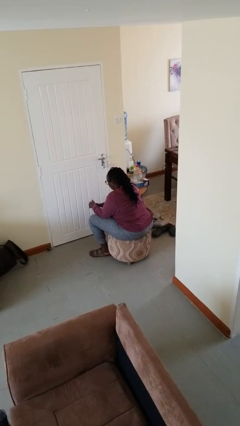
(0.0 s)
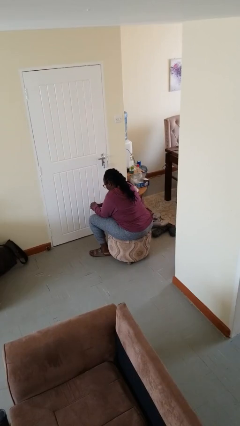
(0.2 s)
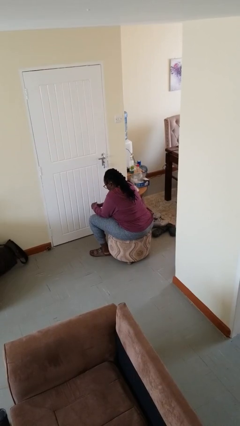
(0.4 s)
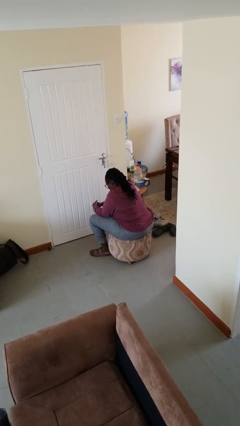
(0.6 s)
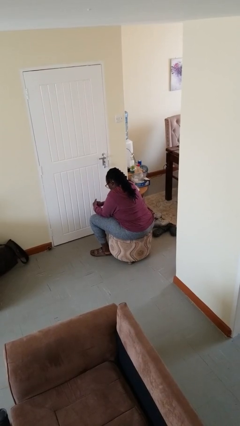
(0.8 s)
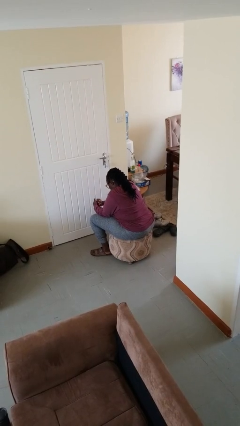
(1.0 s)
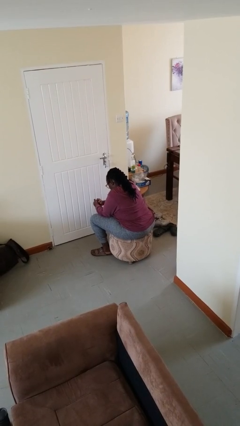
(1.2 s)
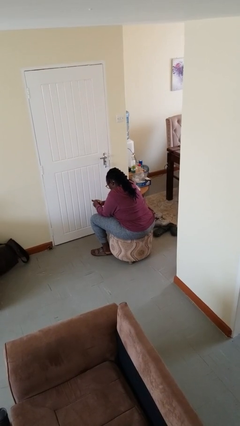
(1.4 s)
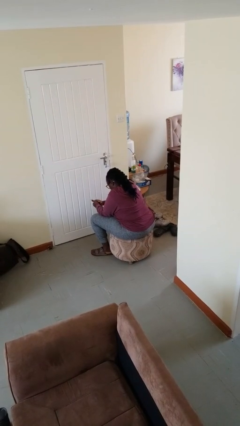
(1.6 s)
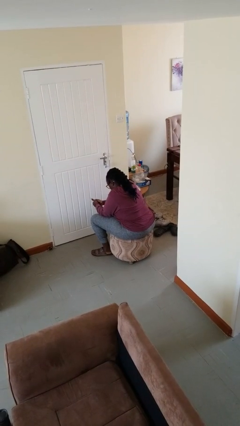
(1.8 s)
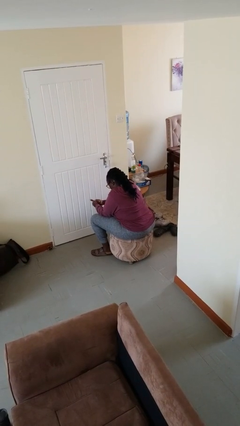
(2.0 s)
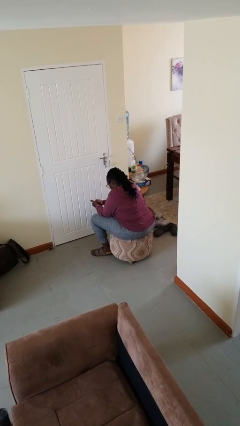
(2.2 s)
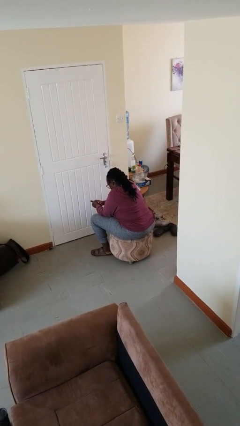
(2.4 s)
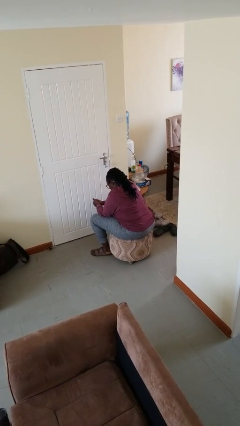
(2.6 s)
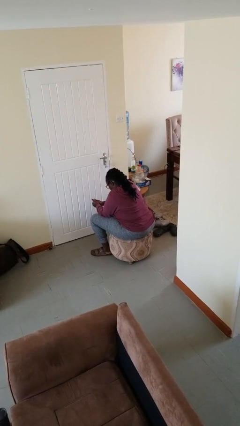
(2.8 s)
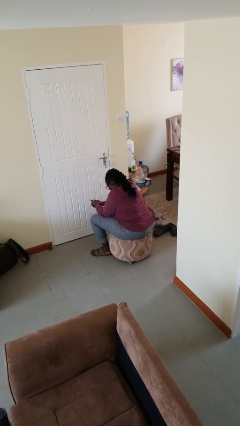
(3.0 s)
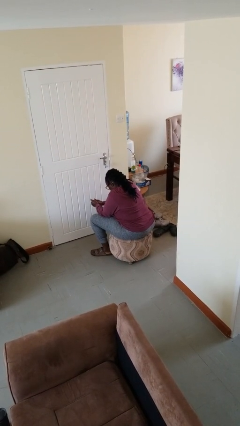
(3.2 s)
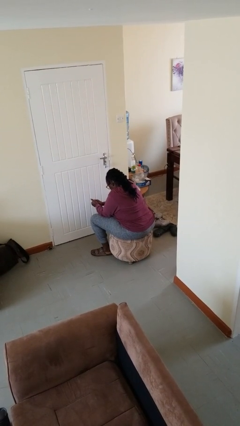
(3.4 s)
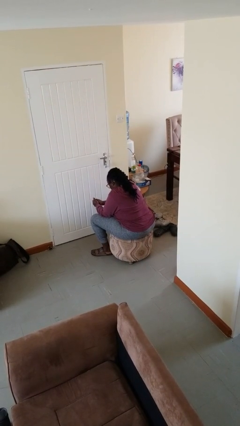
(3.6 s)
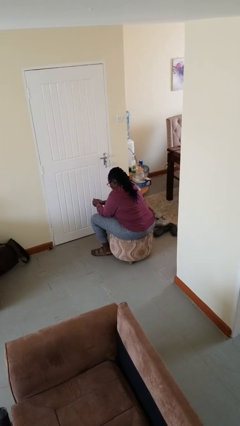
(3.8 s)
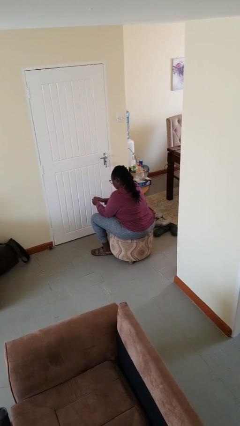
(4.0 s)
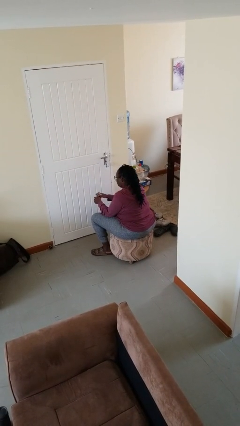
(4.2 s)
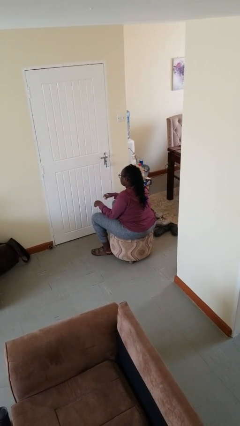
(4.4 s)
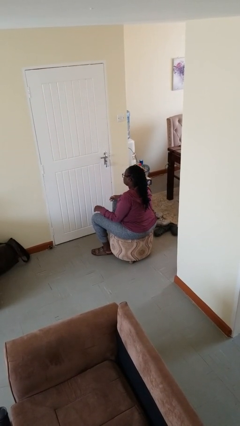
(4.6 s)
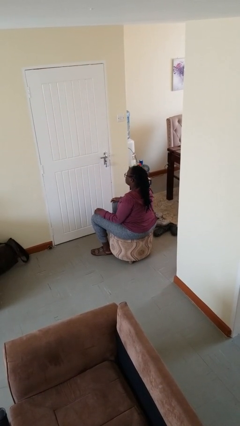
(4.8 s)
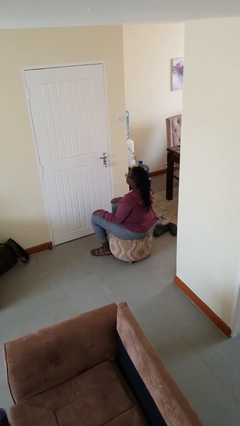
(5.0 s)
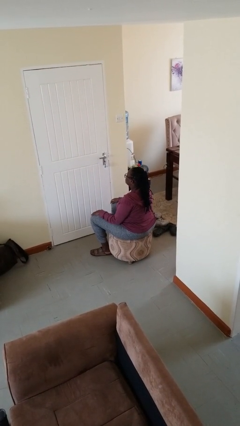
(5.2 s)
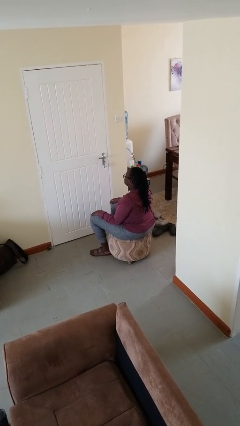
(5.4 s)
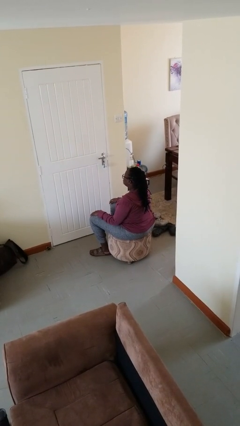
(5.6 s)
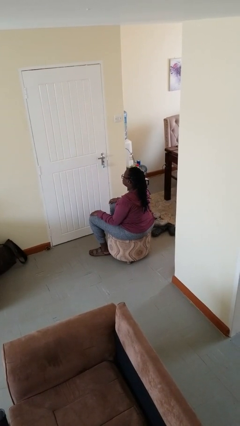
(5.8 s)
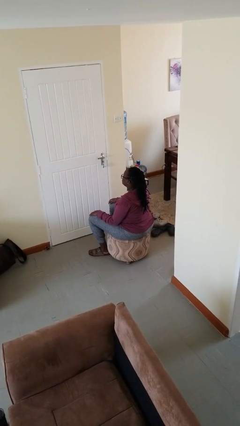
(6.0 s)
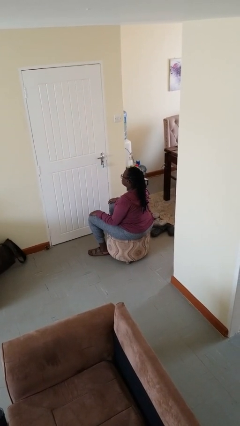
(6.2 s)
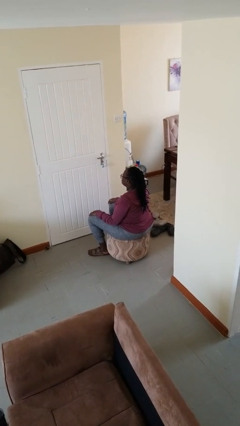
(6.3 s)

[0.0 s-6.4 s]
person looks at hands in lap

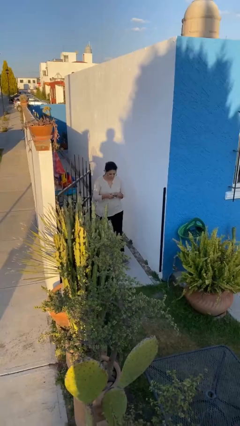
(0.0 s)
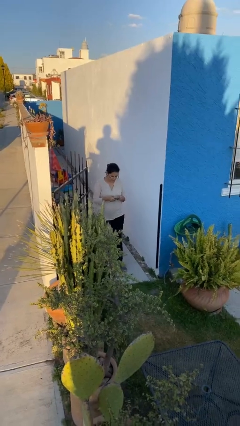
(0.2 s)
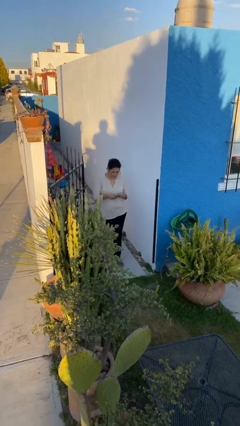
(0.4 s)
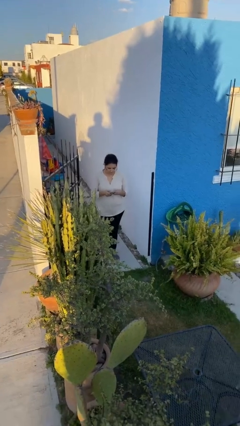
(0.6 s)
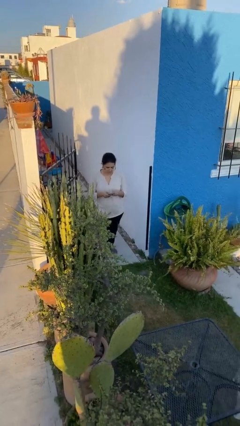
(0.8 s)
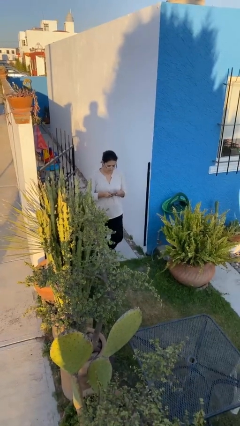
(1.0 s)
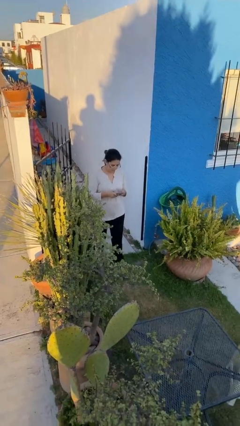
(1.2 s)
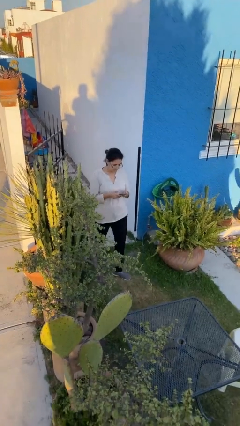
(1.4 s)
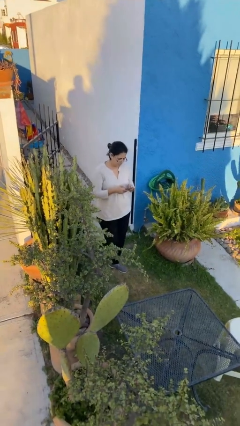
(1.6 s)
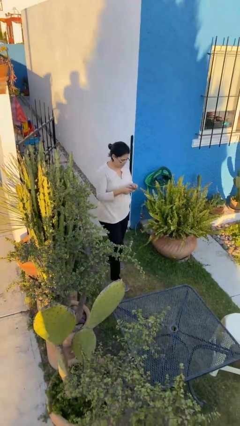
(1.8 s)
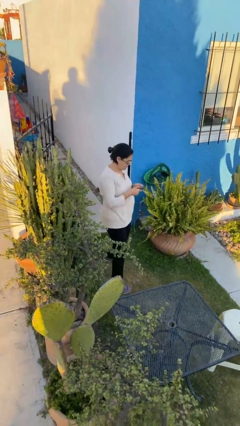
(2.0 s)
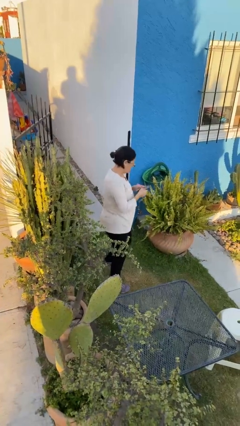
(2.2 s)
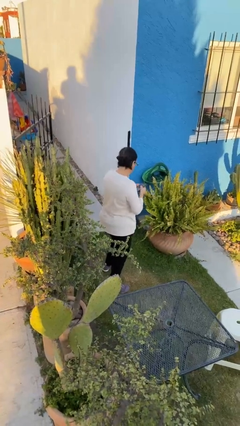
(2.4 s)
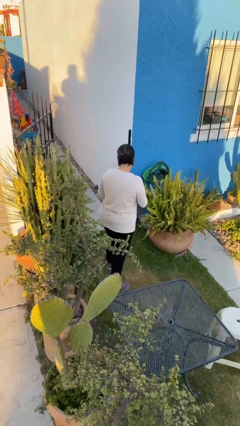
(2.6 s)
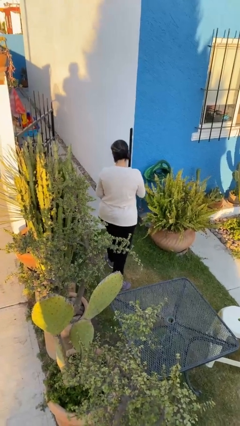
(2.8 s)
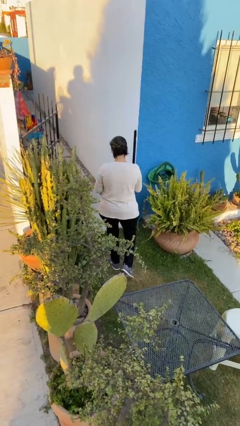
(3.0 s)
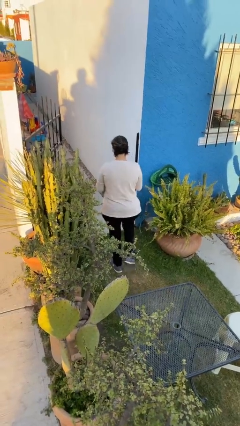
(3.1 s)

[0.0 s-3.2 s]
person enters scene through structure

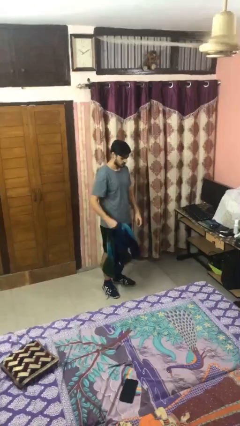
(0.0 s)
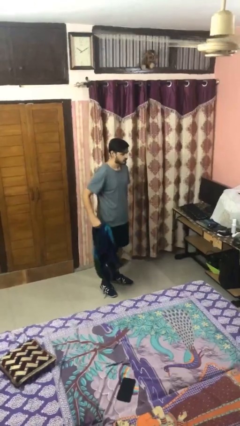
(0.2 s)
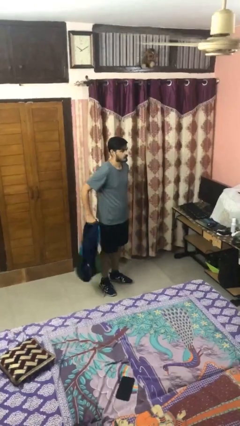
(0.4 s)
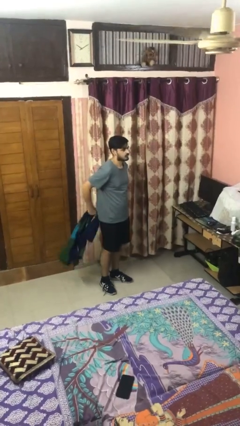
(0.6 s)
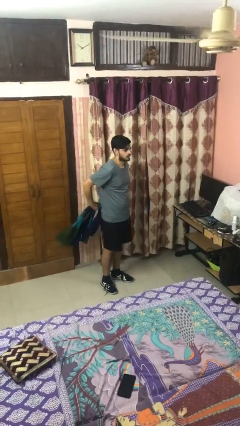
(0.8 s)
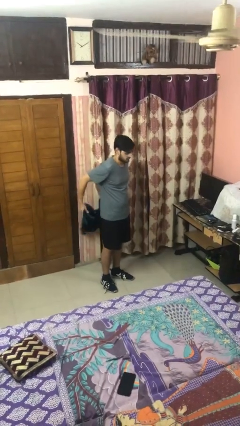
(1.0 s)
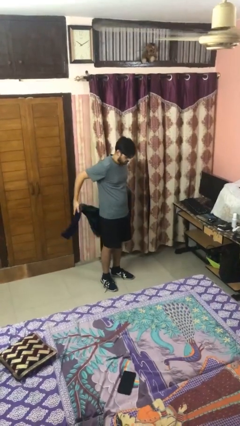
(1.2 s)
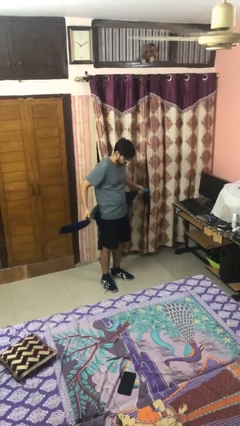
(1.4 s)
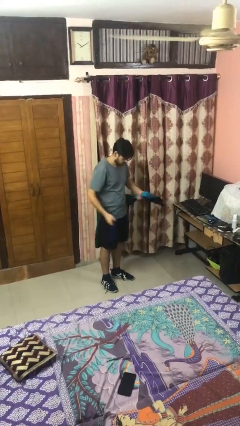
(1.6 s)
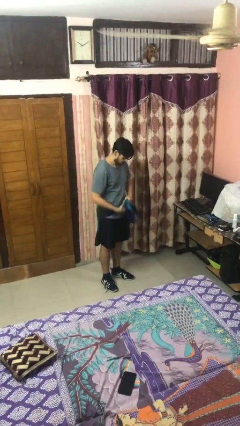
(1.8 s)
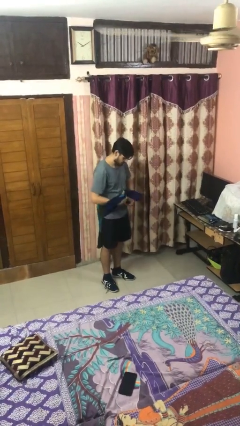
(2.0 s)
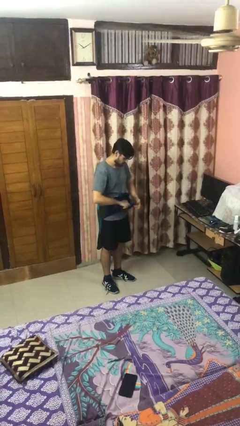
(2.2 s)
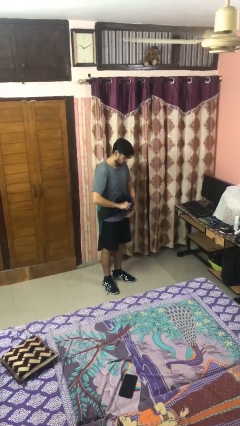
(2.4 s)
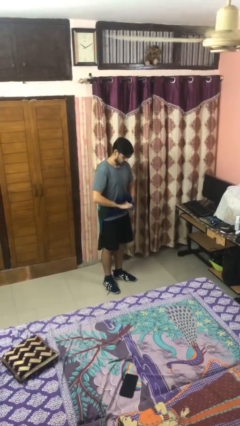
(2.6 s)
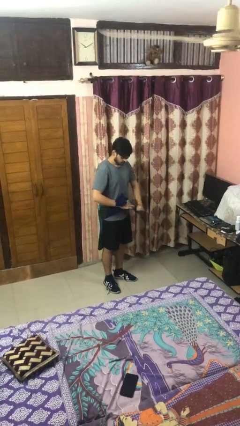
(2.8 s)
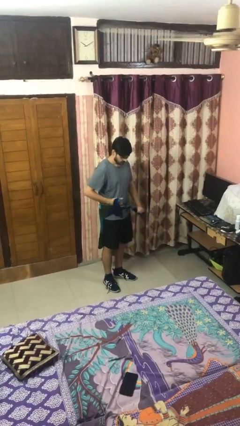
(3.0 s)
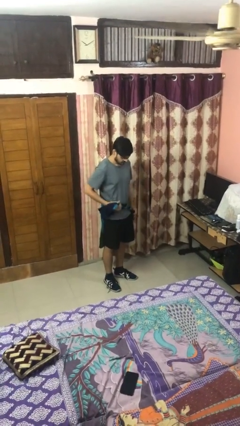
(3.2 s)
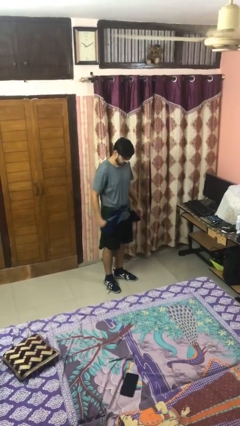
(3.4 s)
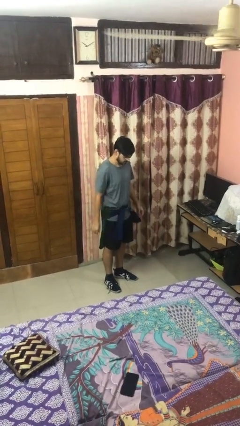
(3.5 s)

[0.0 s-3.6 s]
person ties jacket around waist

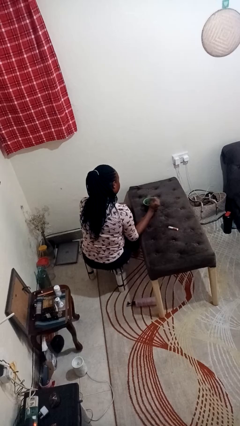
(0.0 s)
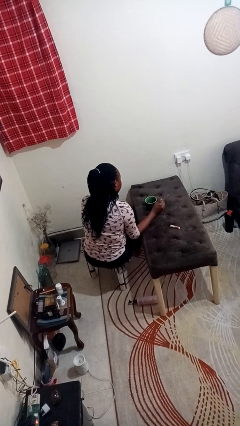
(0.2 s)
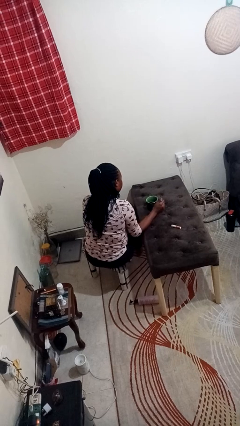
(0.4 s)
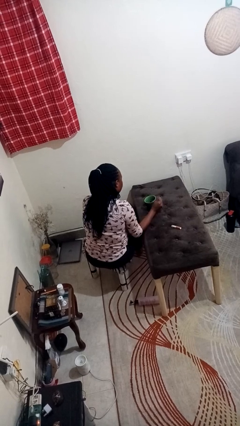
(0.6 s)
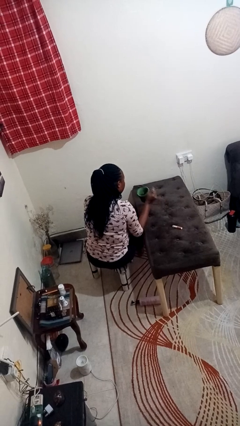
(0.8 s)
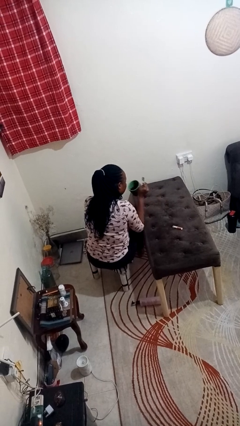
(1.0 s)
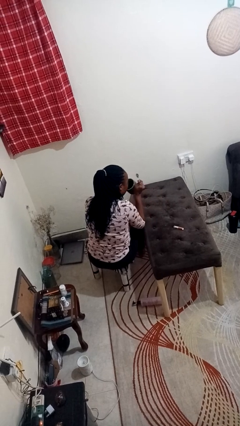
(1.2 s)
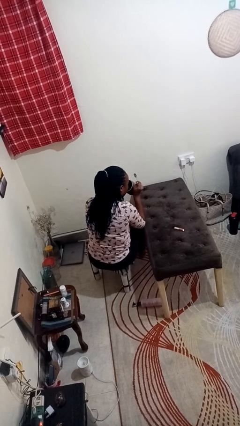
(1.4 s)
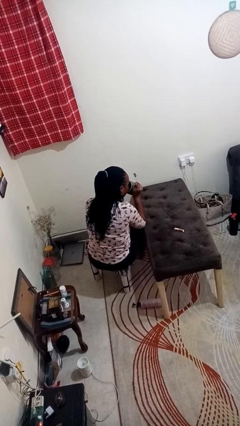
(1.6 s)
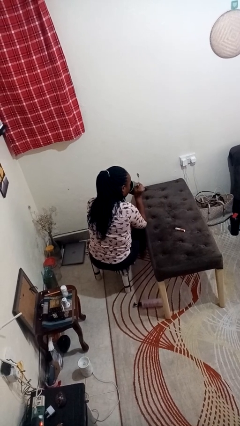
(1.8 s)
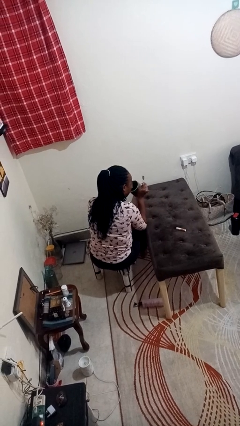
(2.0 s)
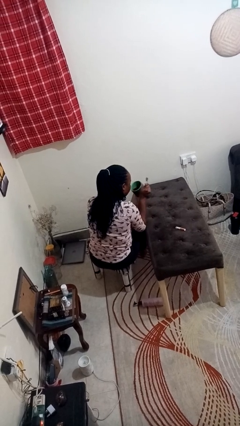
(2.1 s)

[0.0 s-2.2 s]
person drinks from mug

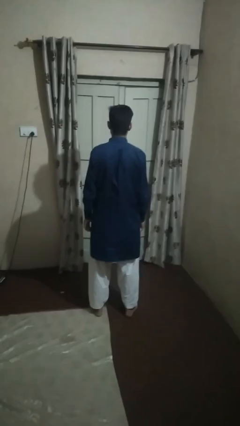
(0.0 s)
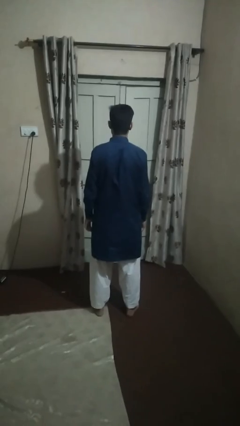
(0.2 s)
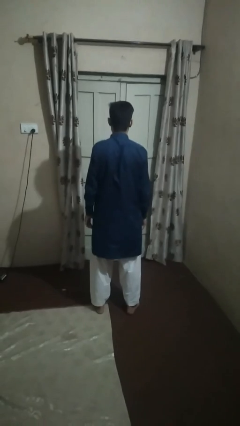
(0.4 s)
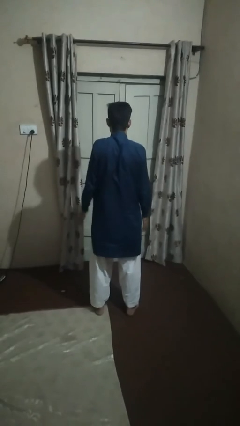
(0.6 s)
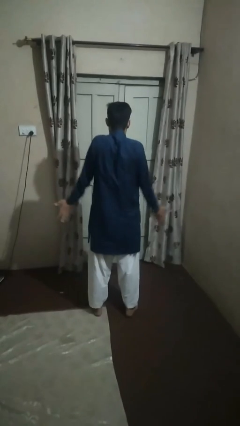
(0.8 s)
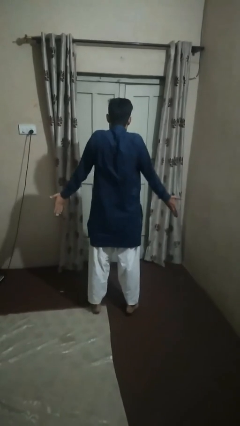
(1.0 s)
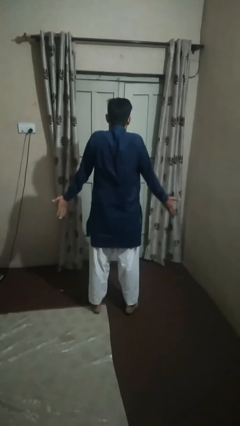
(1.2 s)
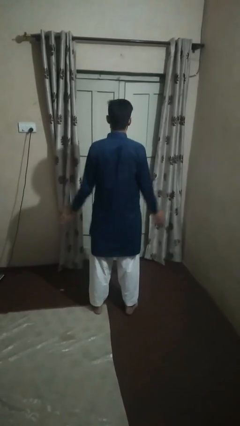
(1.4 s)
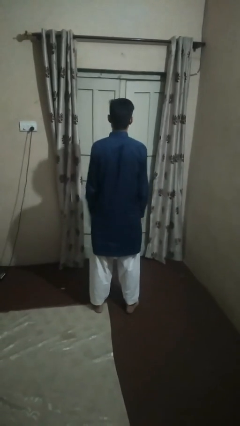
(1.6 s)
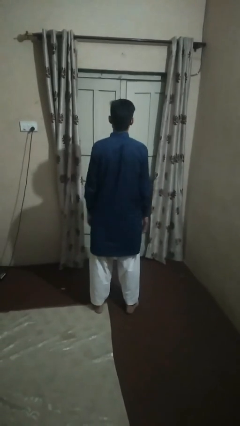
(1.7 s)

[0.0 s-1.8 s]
person shrugs

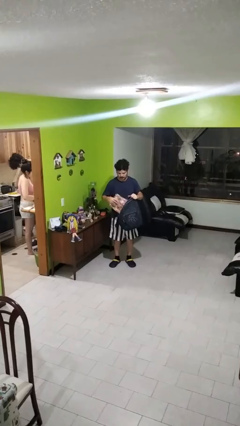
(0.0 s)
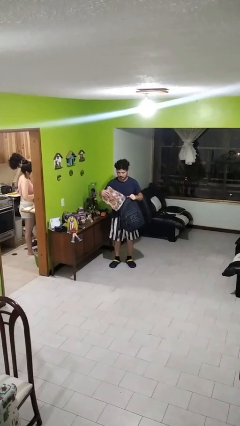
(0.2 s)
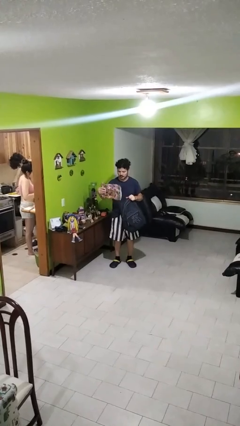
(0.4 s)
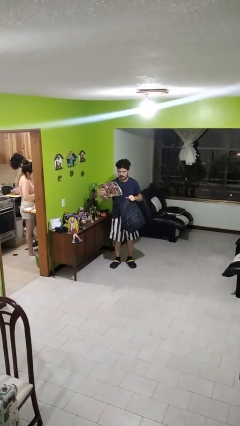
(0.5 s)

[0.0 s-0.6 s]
person takes object from purse
